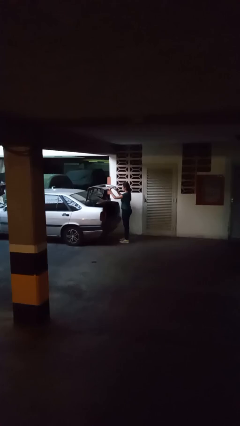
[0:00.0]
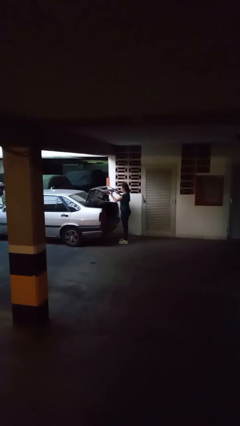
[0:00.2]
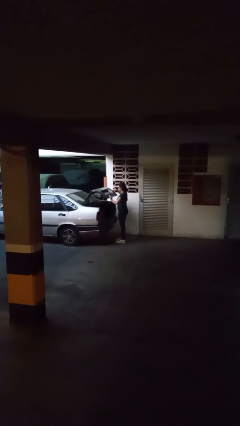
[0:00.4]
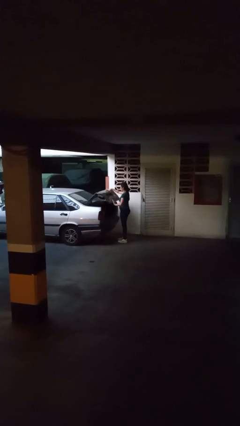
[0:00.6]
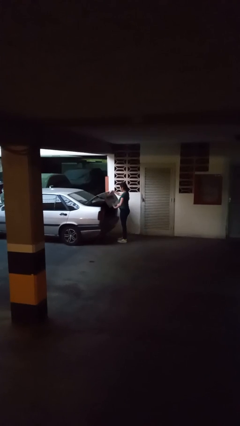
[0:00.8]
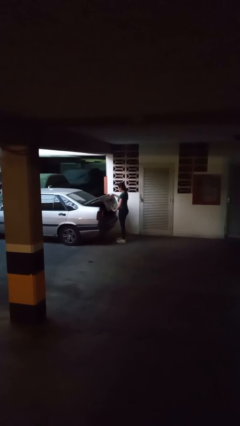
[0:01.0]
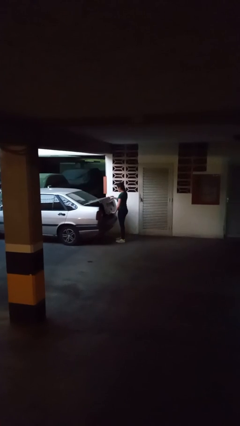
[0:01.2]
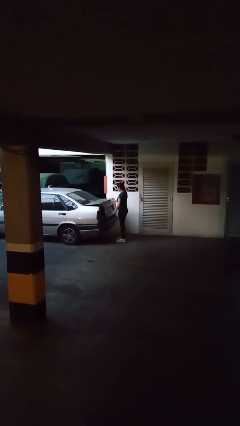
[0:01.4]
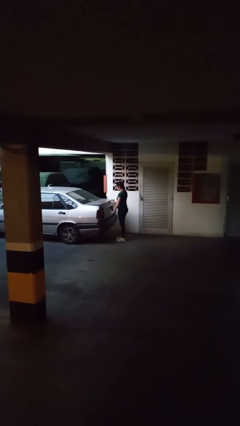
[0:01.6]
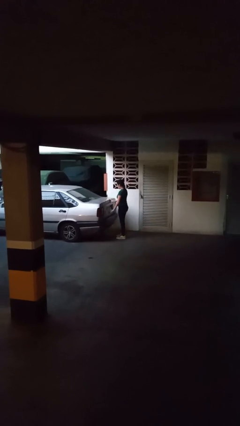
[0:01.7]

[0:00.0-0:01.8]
person closes car trunk

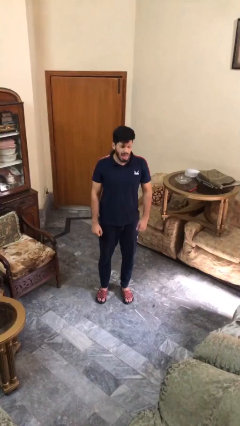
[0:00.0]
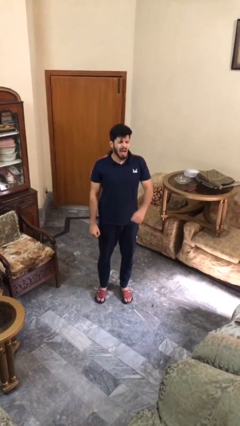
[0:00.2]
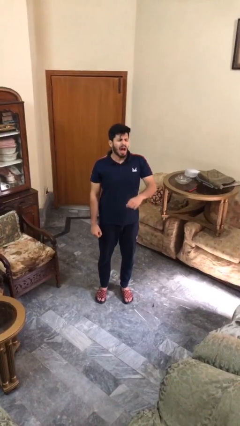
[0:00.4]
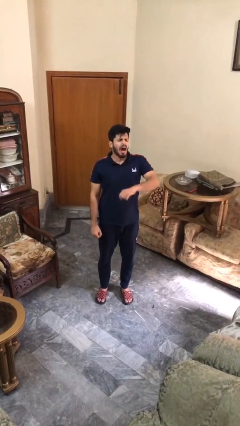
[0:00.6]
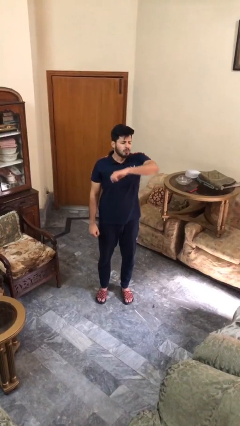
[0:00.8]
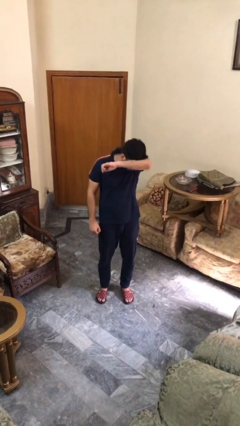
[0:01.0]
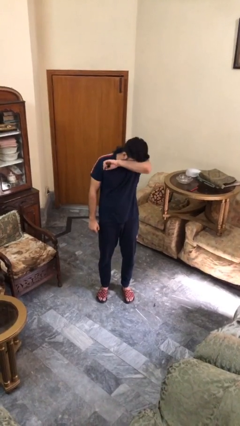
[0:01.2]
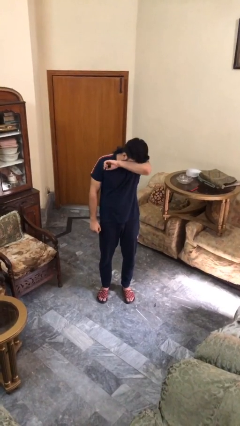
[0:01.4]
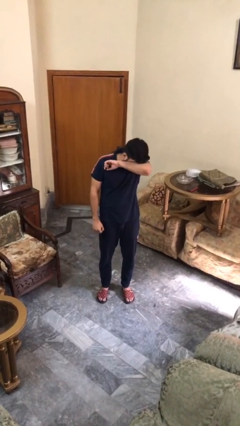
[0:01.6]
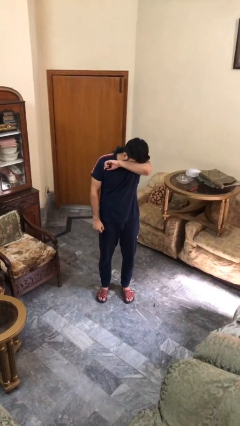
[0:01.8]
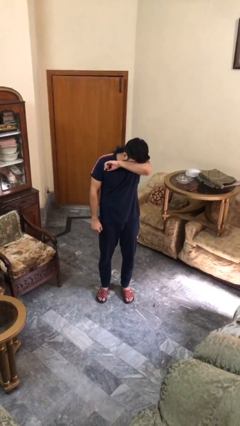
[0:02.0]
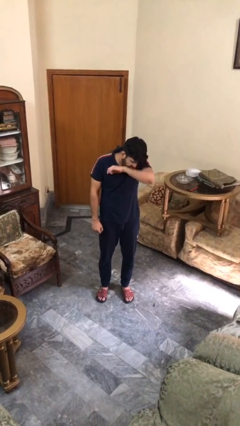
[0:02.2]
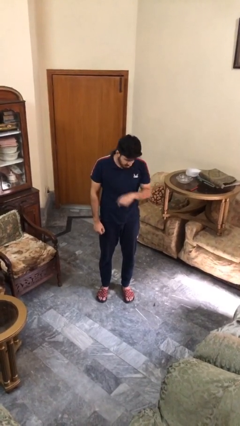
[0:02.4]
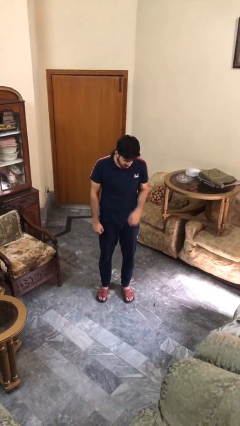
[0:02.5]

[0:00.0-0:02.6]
person sneezes into arm

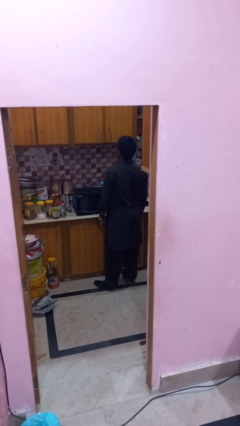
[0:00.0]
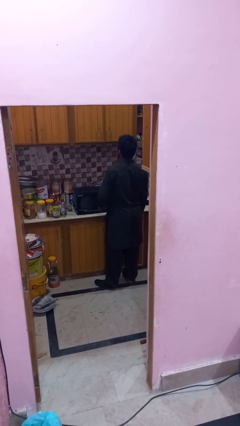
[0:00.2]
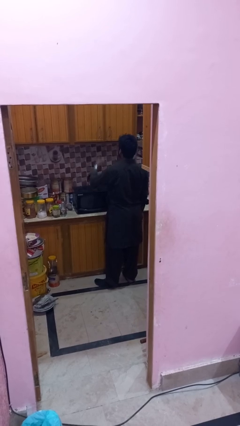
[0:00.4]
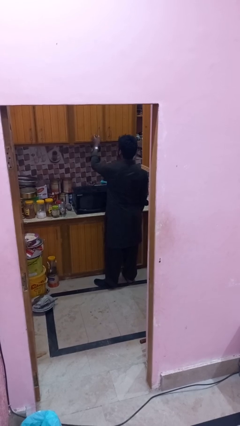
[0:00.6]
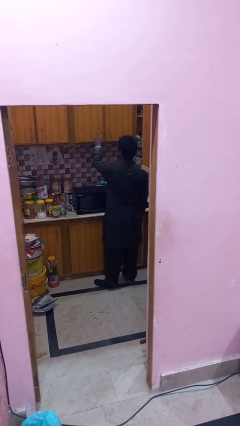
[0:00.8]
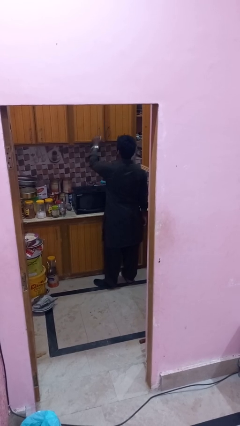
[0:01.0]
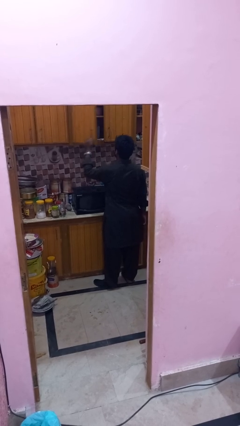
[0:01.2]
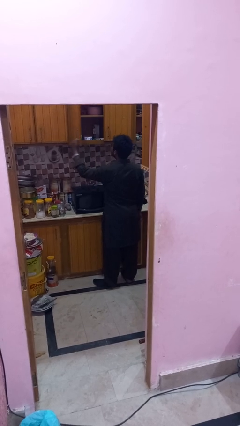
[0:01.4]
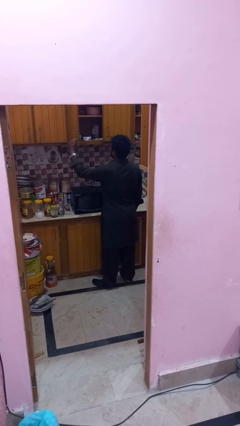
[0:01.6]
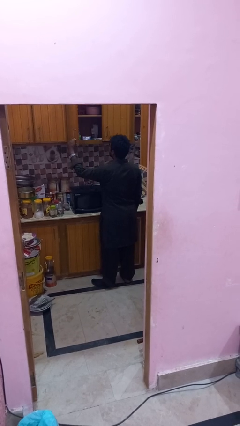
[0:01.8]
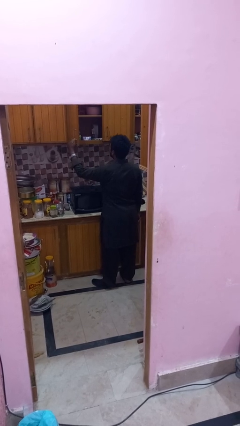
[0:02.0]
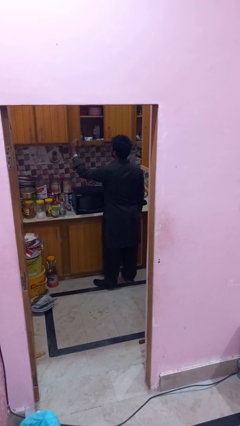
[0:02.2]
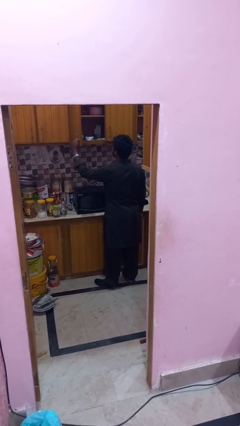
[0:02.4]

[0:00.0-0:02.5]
person opens cabinet

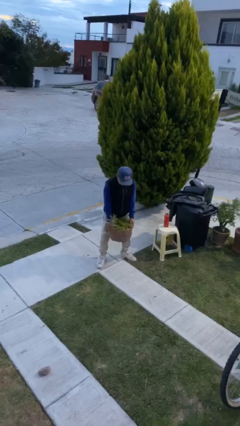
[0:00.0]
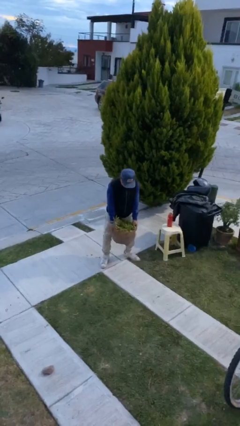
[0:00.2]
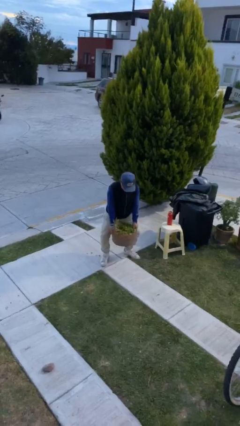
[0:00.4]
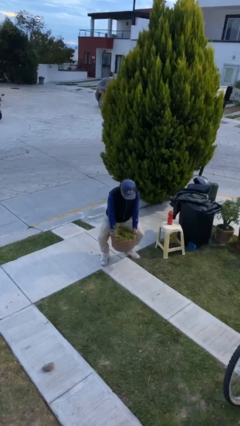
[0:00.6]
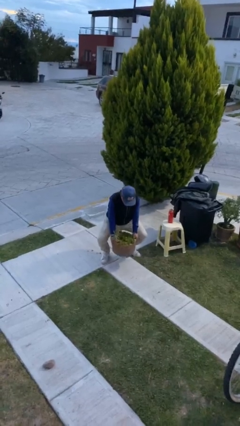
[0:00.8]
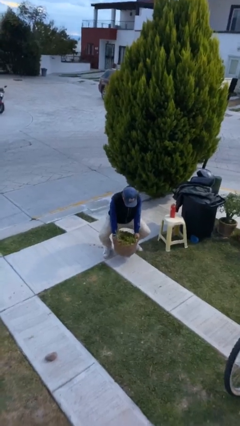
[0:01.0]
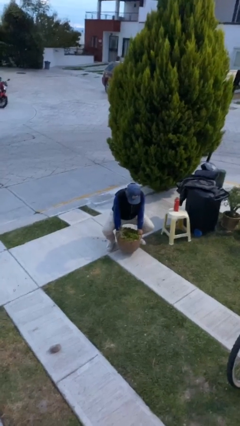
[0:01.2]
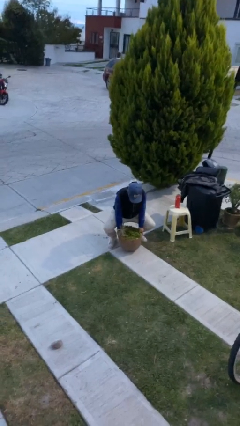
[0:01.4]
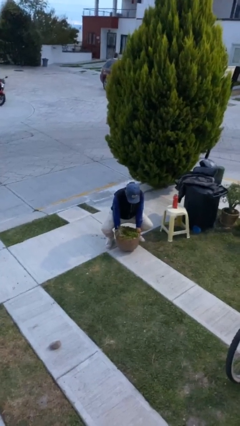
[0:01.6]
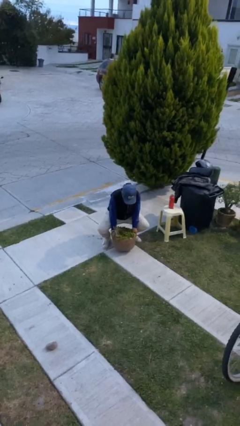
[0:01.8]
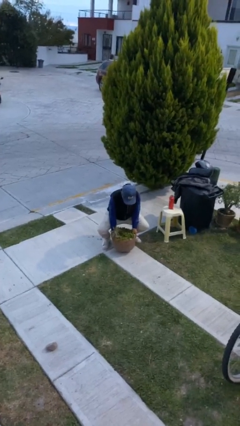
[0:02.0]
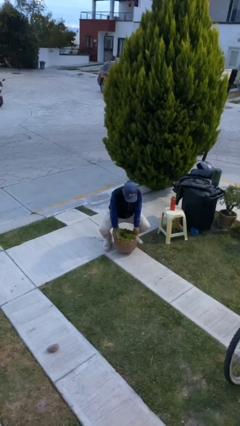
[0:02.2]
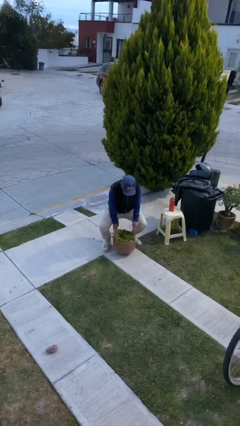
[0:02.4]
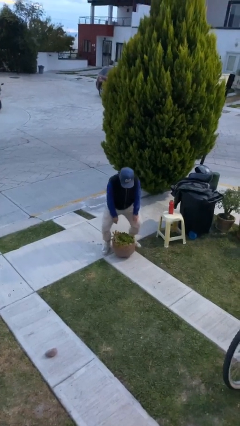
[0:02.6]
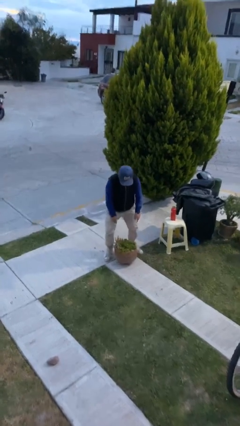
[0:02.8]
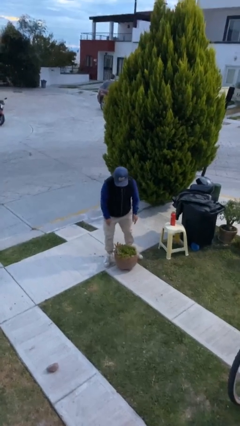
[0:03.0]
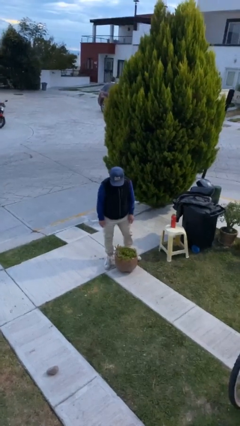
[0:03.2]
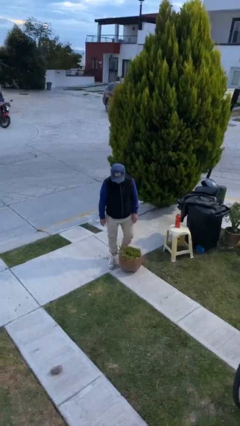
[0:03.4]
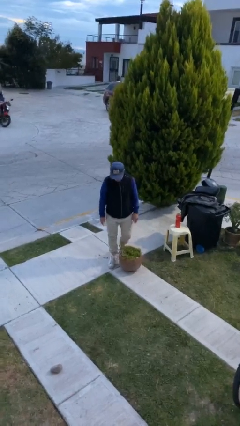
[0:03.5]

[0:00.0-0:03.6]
person puts down object on floor

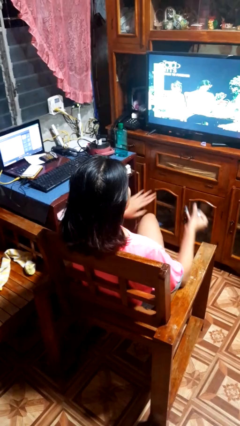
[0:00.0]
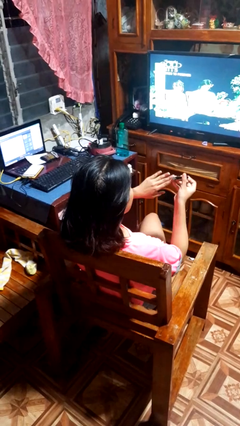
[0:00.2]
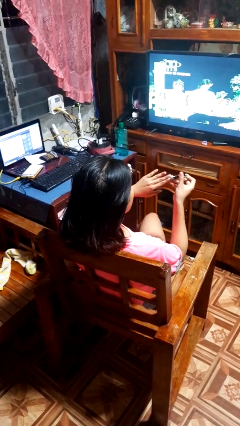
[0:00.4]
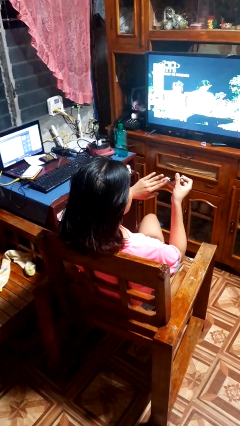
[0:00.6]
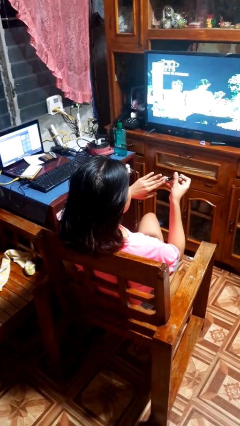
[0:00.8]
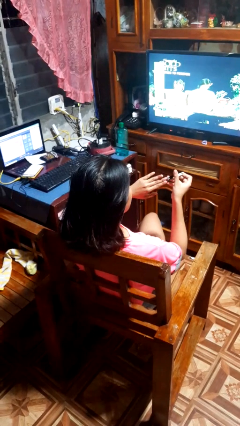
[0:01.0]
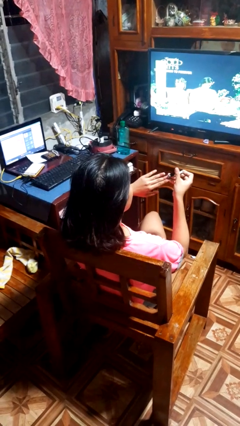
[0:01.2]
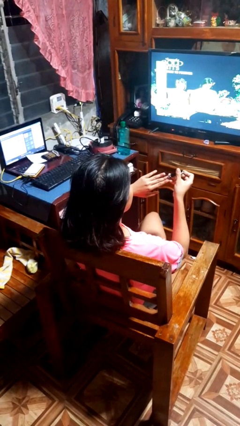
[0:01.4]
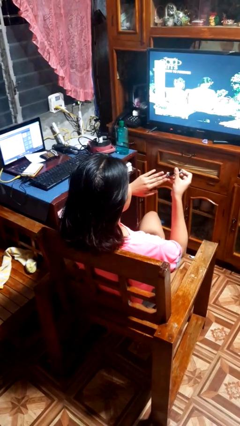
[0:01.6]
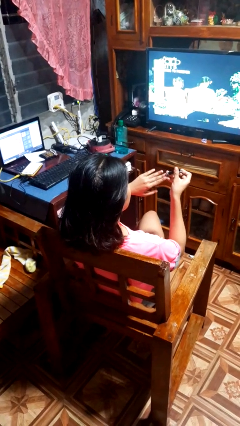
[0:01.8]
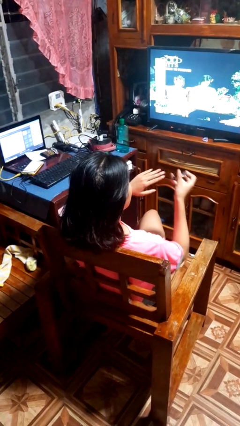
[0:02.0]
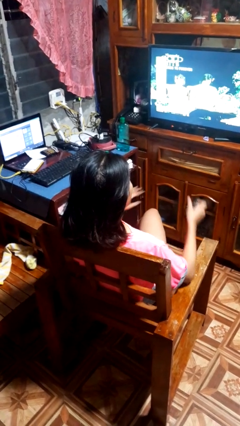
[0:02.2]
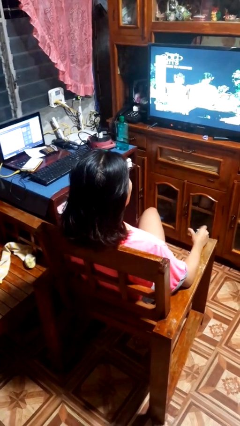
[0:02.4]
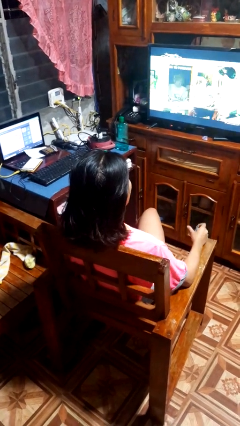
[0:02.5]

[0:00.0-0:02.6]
person clips fingernails

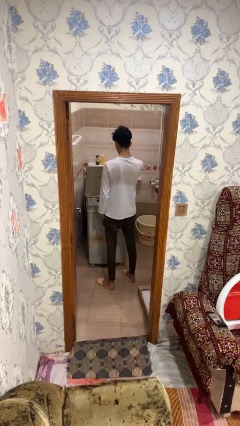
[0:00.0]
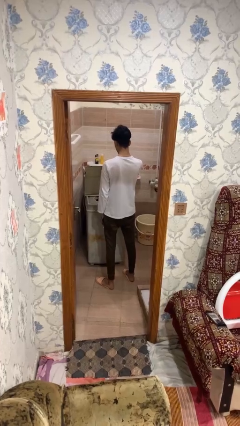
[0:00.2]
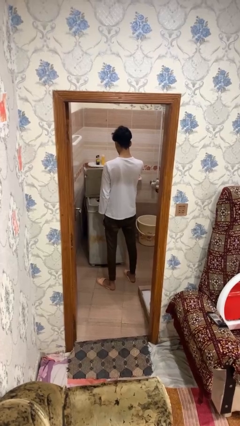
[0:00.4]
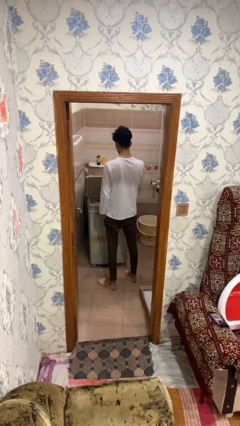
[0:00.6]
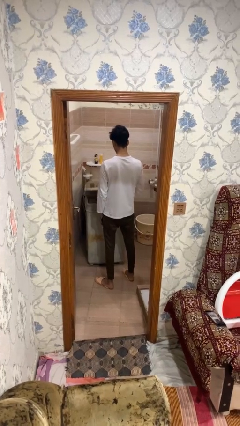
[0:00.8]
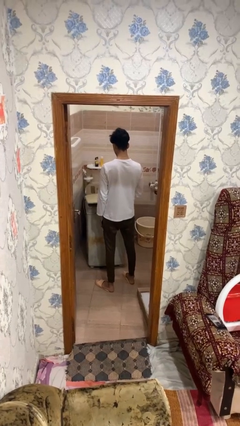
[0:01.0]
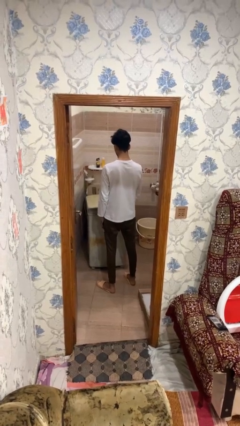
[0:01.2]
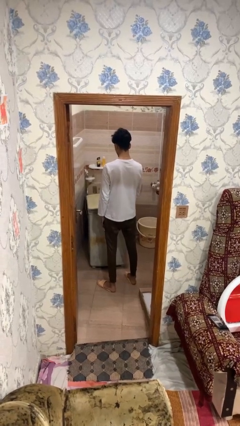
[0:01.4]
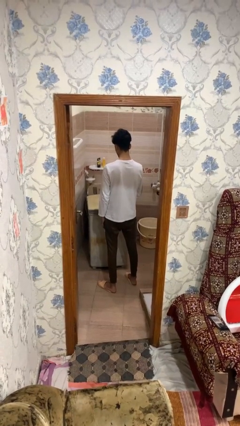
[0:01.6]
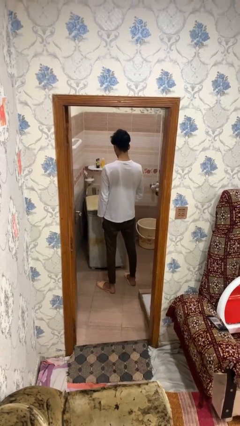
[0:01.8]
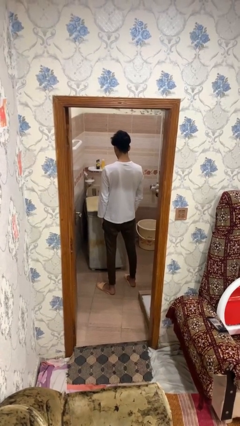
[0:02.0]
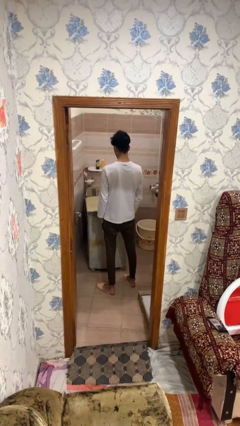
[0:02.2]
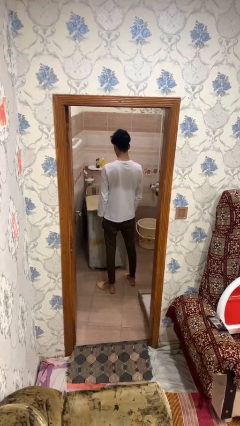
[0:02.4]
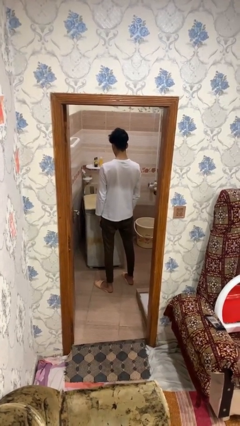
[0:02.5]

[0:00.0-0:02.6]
person closes clothes washer

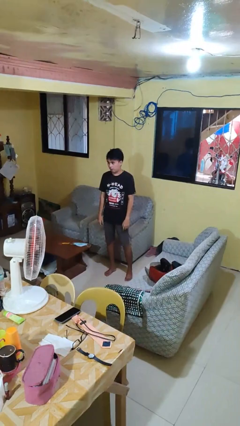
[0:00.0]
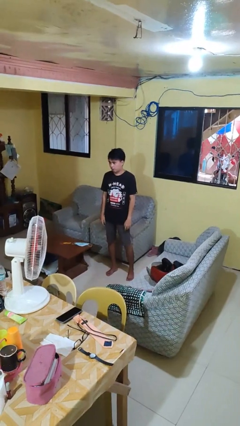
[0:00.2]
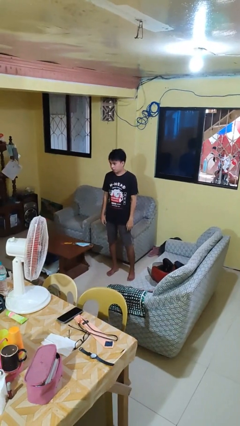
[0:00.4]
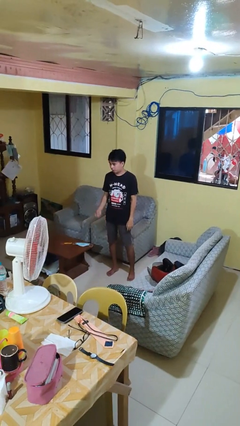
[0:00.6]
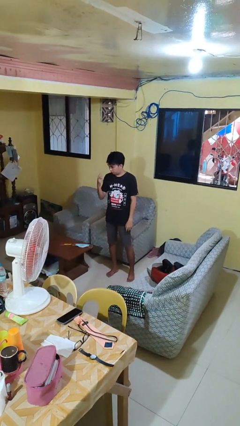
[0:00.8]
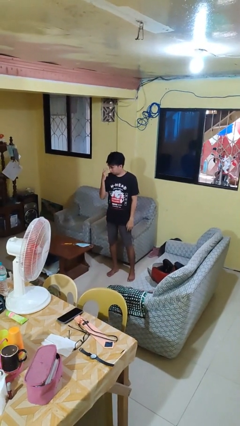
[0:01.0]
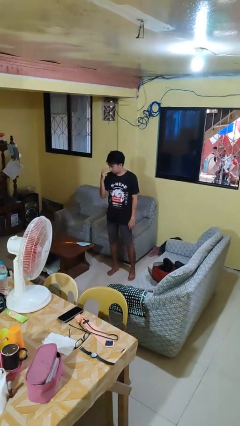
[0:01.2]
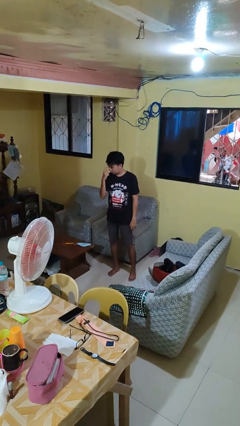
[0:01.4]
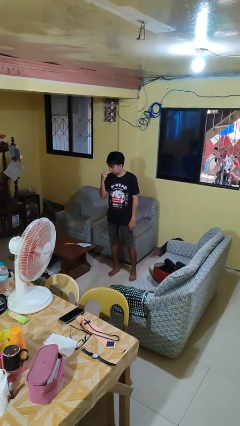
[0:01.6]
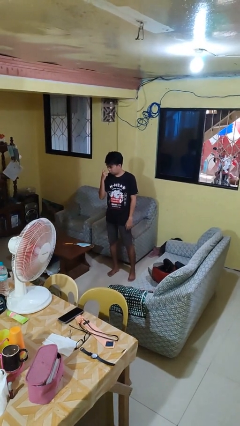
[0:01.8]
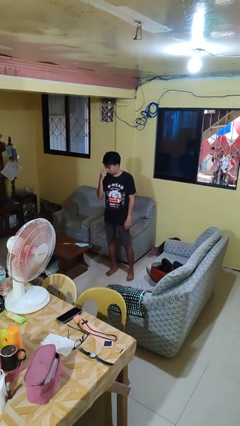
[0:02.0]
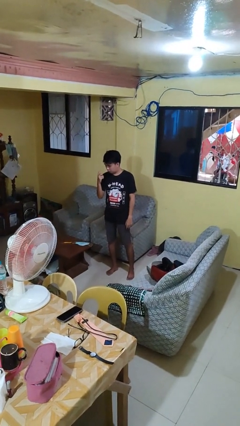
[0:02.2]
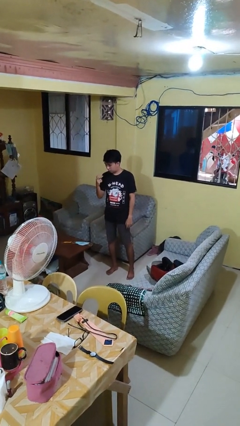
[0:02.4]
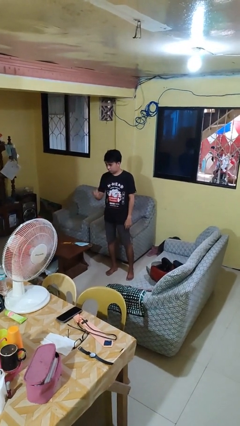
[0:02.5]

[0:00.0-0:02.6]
person gestures watch closely
